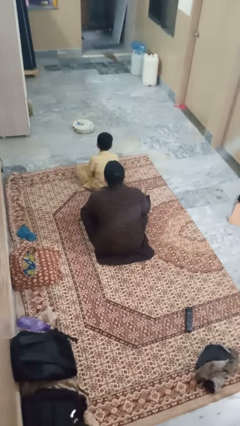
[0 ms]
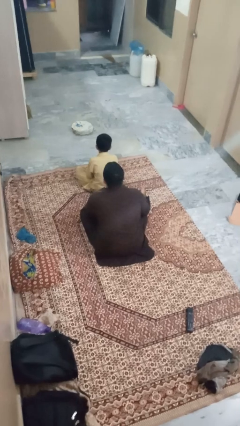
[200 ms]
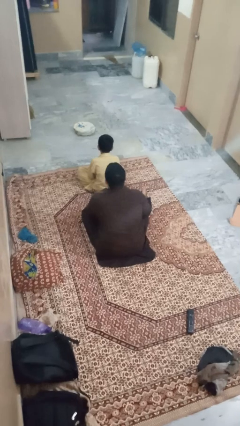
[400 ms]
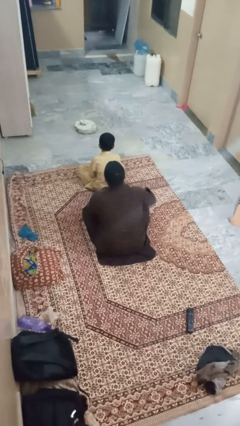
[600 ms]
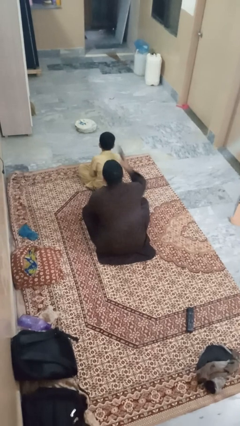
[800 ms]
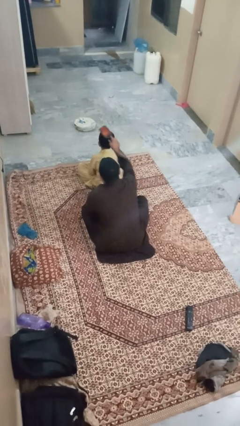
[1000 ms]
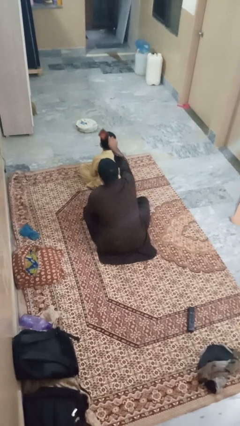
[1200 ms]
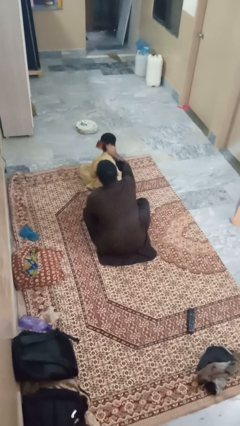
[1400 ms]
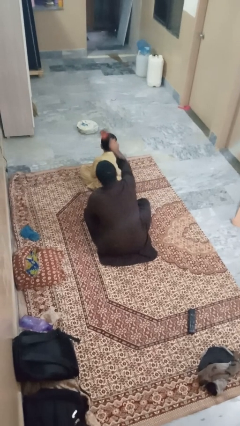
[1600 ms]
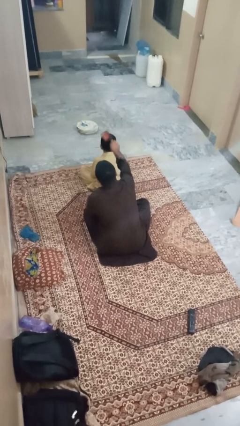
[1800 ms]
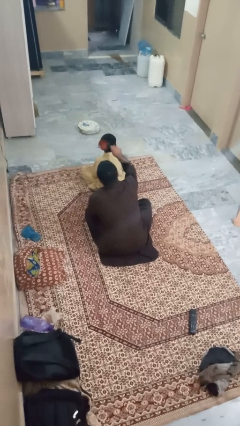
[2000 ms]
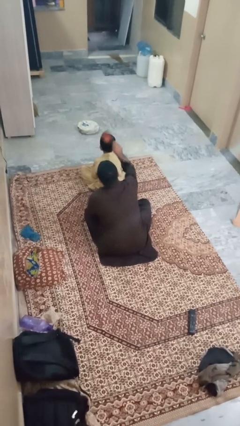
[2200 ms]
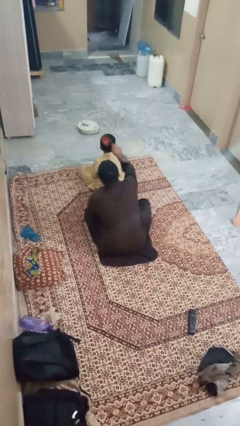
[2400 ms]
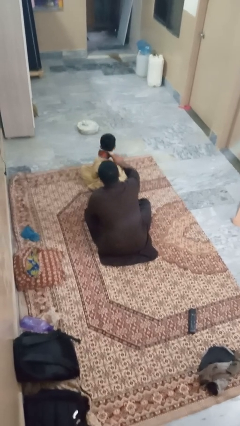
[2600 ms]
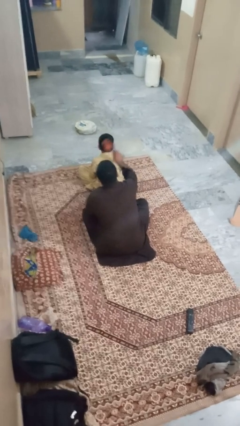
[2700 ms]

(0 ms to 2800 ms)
person brushes hair of person

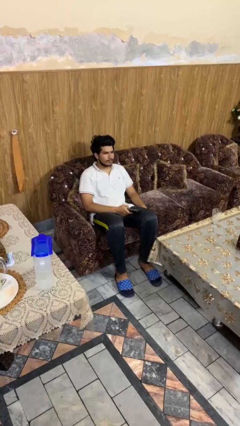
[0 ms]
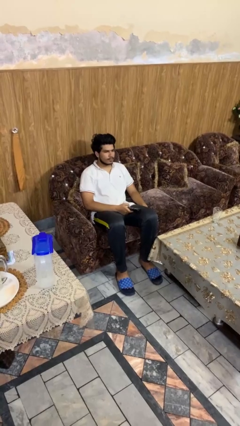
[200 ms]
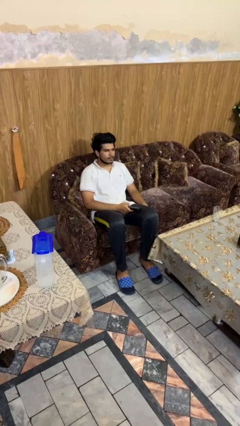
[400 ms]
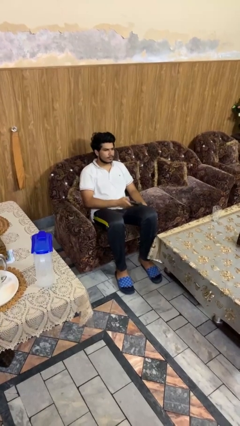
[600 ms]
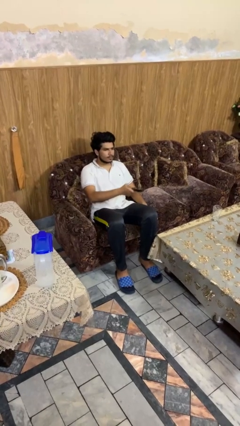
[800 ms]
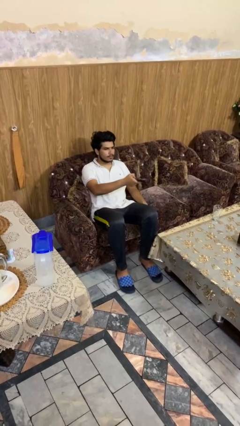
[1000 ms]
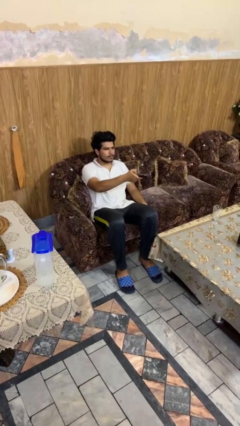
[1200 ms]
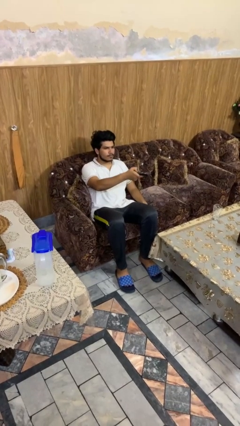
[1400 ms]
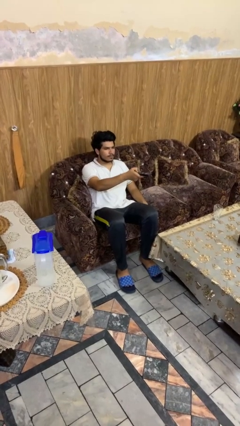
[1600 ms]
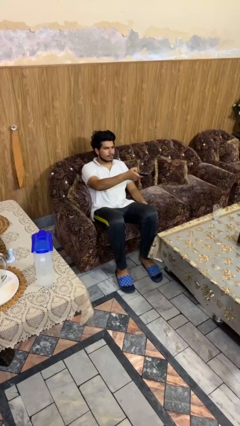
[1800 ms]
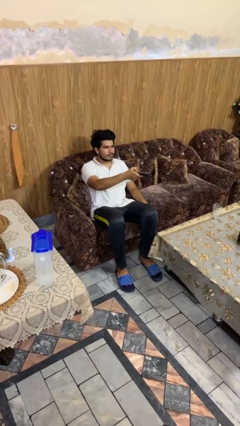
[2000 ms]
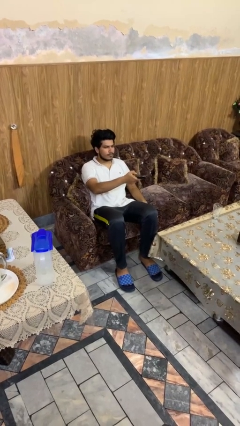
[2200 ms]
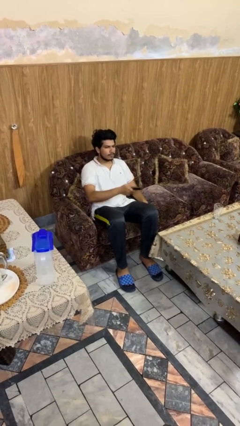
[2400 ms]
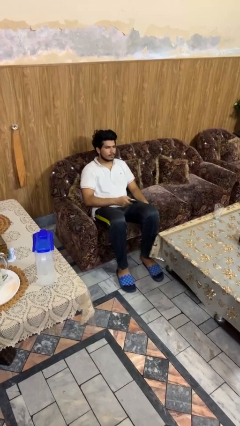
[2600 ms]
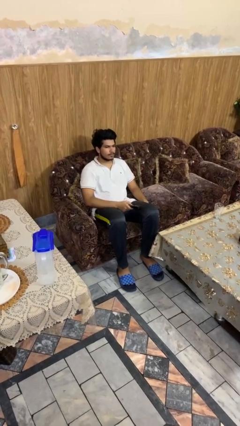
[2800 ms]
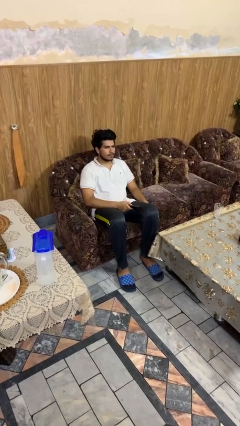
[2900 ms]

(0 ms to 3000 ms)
person uses television remote

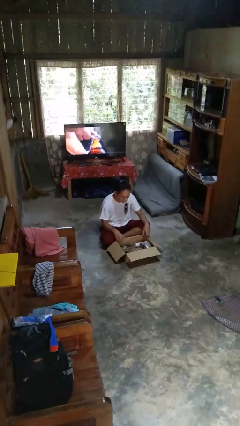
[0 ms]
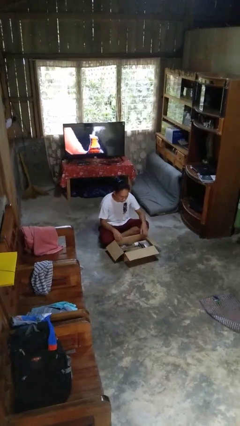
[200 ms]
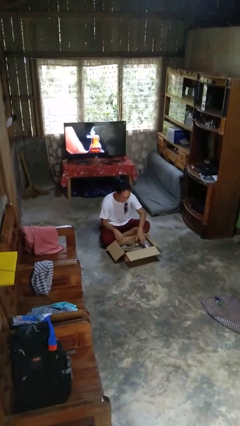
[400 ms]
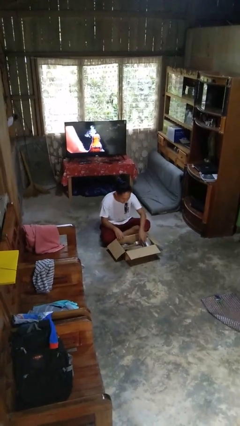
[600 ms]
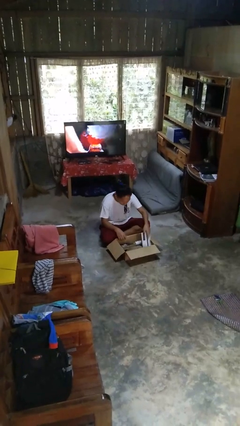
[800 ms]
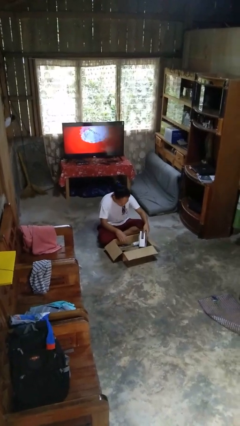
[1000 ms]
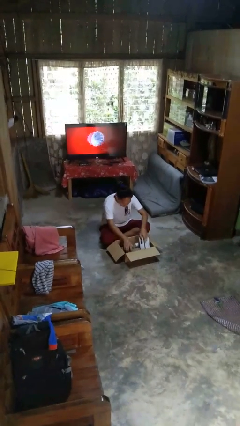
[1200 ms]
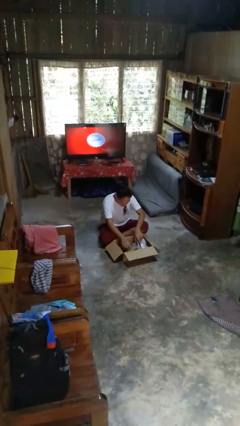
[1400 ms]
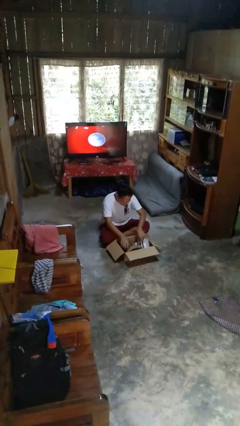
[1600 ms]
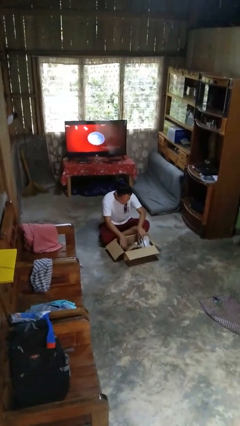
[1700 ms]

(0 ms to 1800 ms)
person searches in box

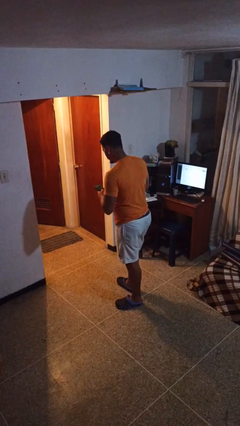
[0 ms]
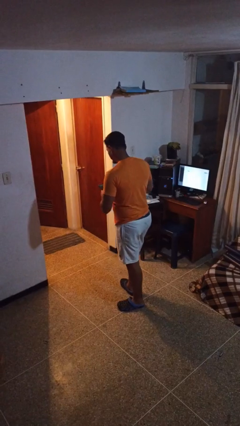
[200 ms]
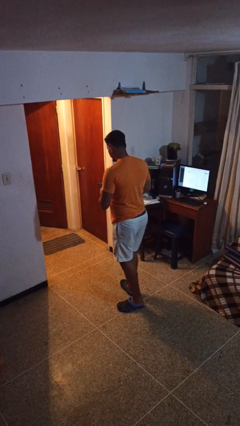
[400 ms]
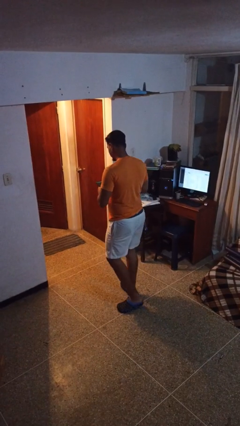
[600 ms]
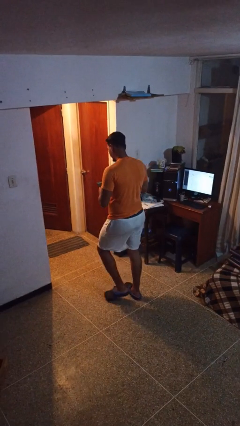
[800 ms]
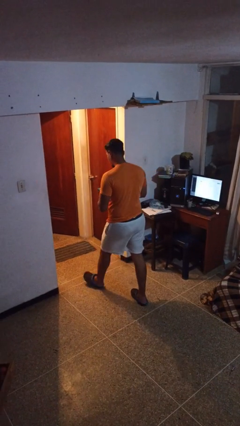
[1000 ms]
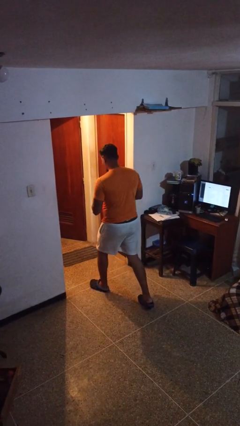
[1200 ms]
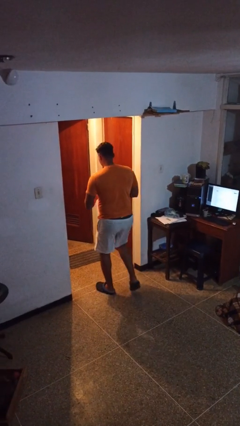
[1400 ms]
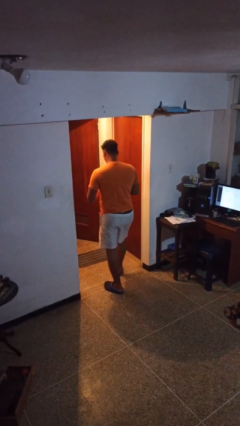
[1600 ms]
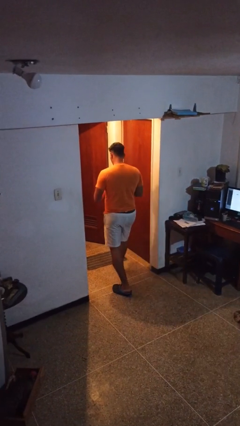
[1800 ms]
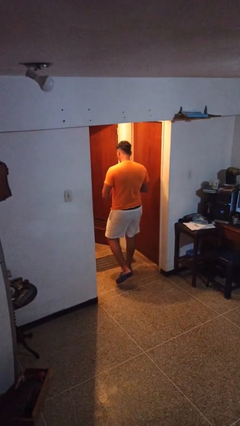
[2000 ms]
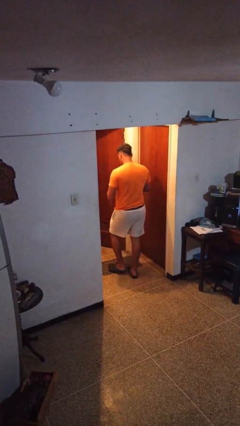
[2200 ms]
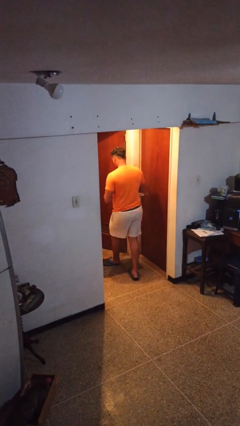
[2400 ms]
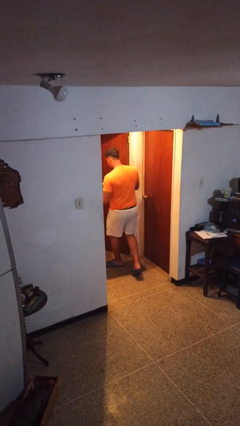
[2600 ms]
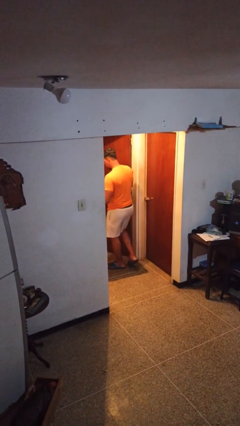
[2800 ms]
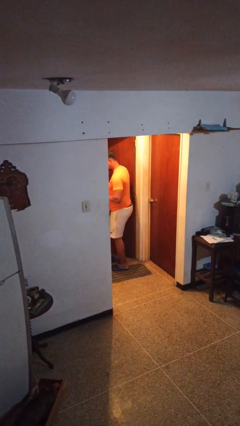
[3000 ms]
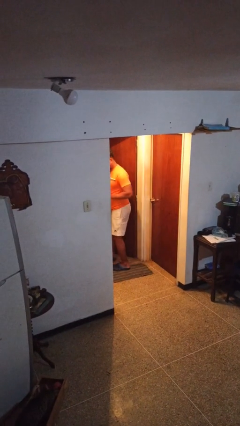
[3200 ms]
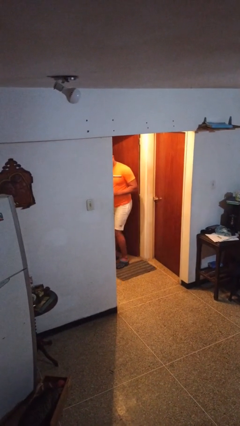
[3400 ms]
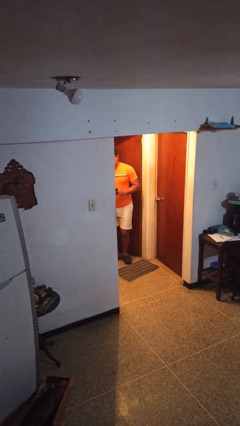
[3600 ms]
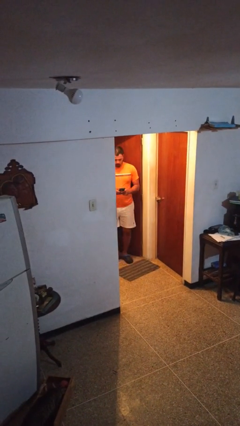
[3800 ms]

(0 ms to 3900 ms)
person exits scene through structure

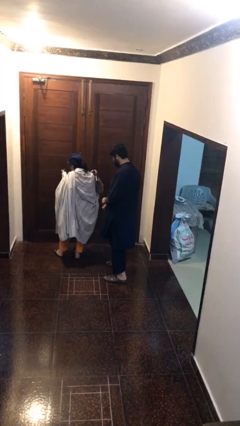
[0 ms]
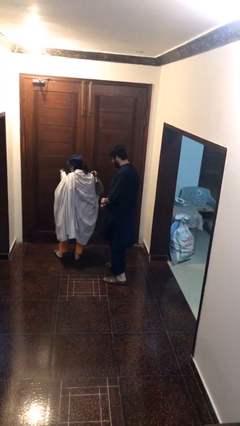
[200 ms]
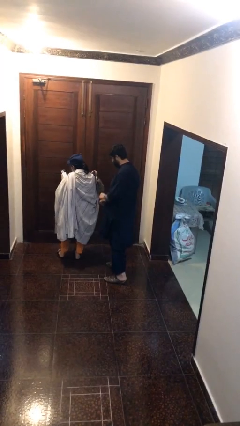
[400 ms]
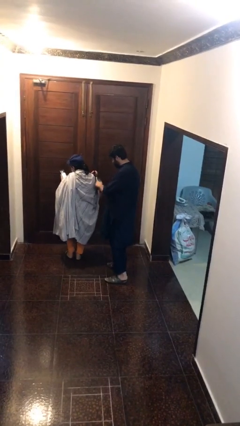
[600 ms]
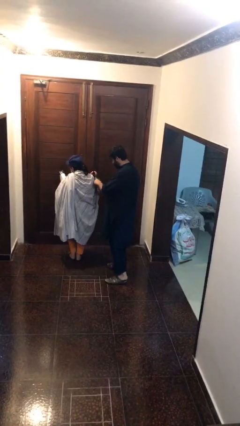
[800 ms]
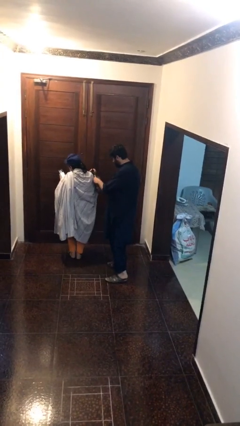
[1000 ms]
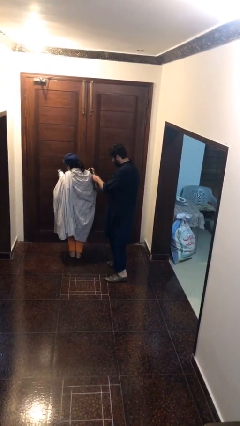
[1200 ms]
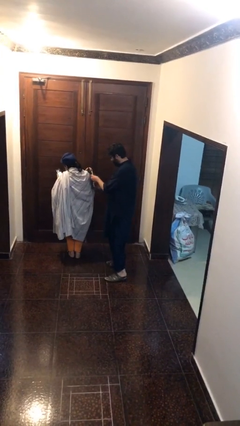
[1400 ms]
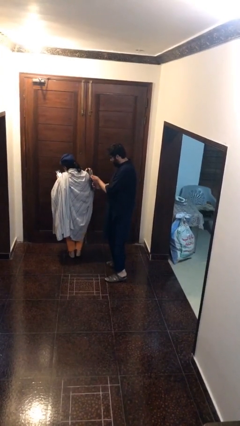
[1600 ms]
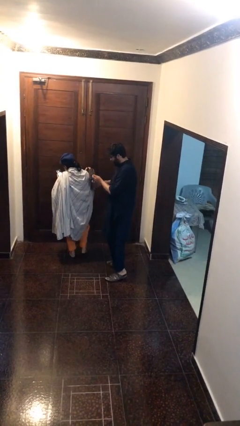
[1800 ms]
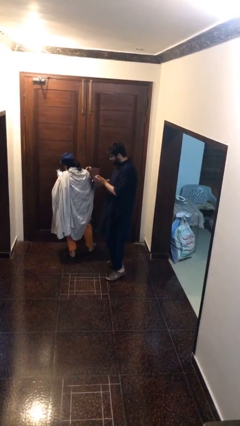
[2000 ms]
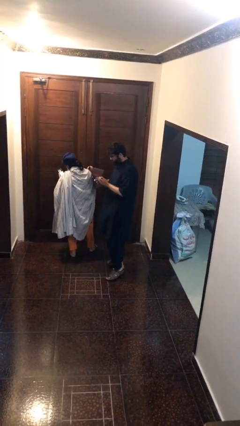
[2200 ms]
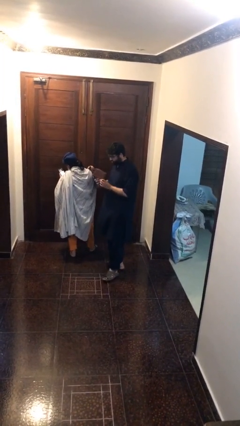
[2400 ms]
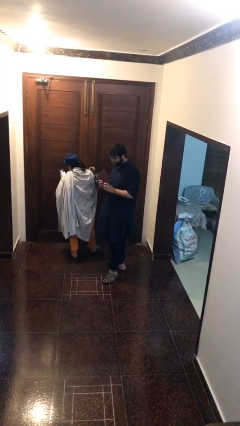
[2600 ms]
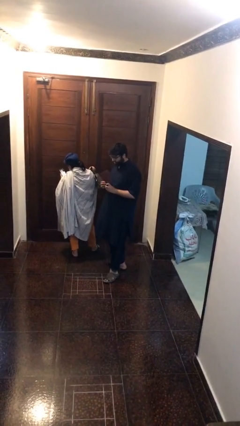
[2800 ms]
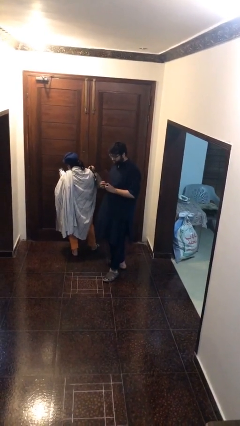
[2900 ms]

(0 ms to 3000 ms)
person steals object from person

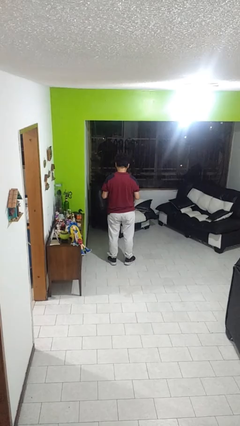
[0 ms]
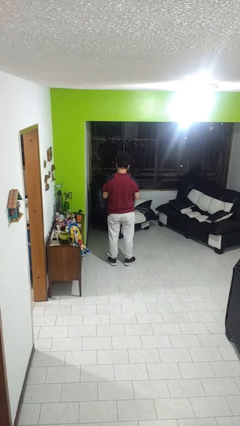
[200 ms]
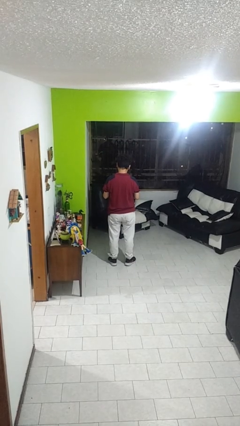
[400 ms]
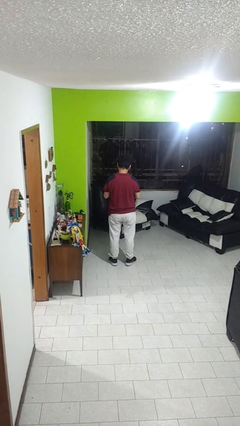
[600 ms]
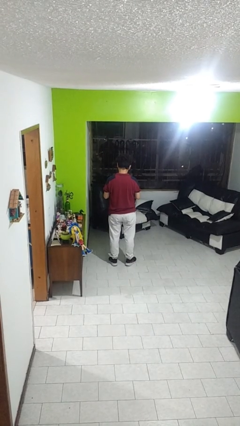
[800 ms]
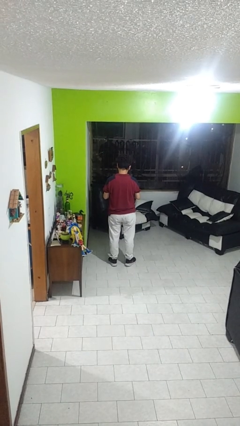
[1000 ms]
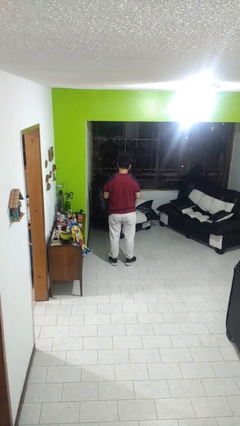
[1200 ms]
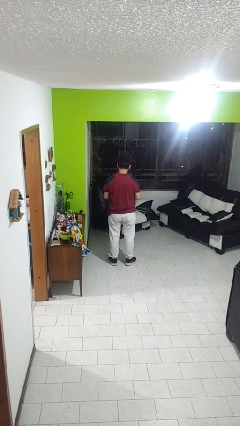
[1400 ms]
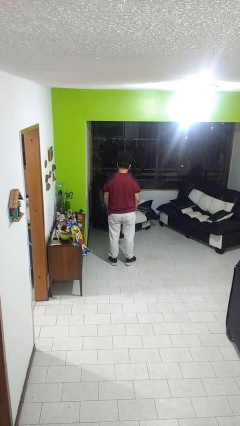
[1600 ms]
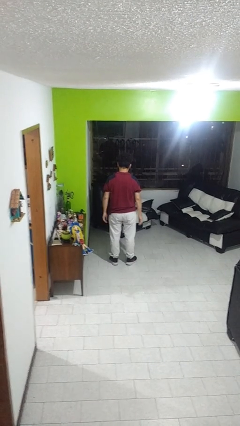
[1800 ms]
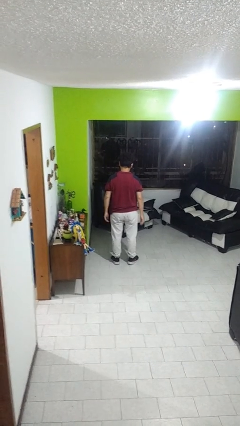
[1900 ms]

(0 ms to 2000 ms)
person cracks knuckles

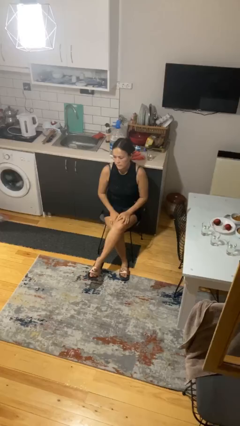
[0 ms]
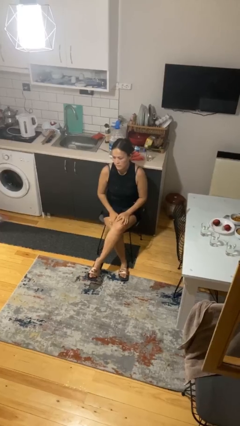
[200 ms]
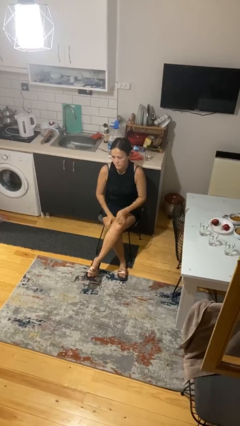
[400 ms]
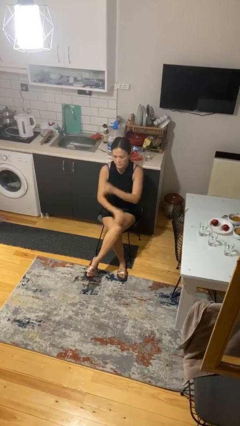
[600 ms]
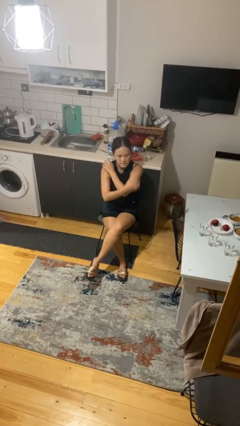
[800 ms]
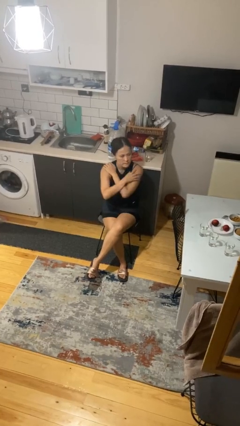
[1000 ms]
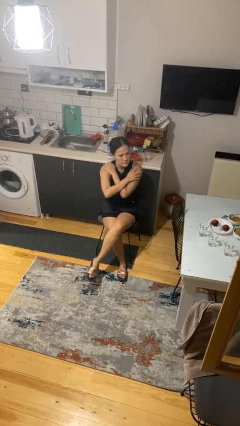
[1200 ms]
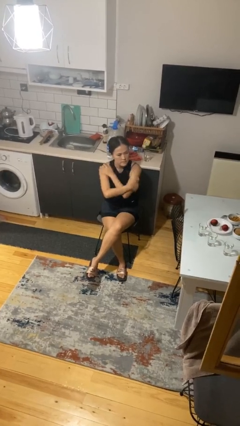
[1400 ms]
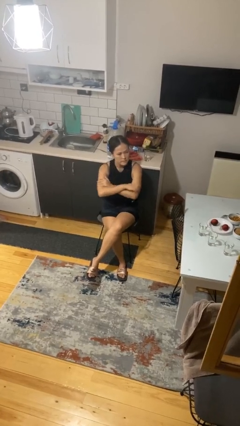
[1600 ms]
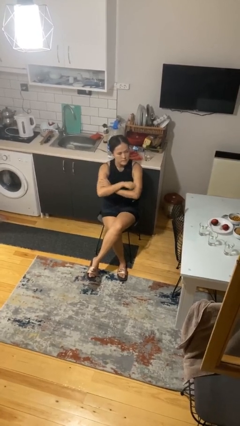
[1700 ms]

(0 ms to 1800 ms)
person crosses arms
